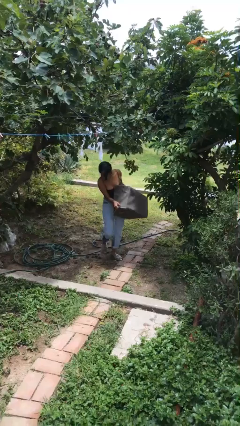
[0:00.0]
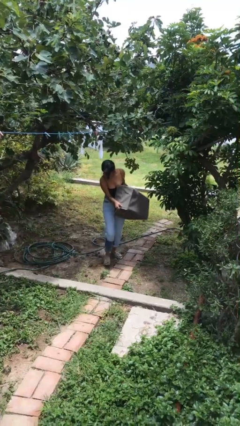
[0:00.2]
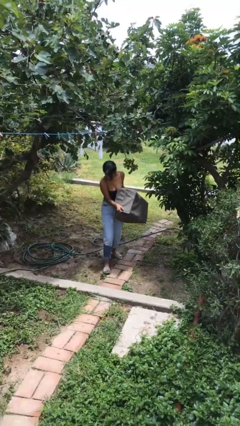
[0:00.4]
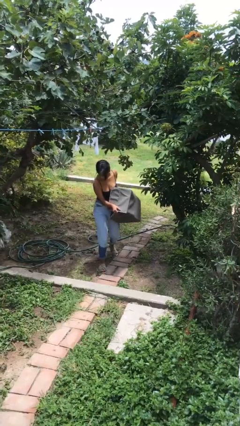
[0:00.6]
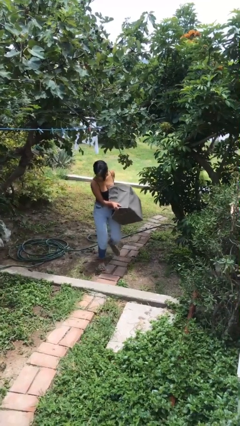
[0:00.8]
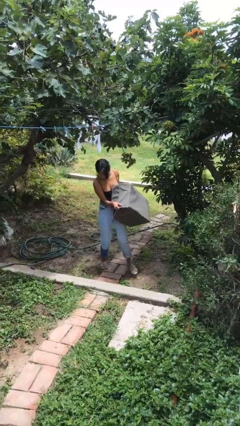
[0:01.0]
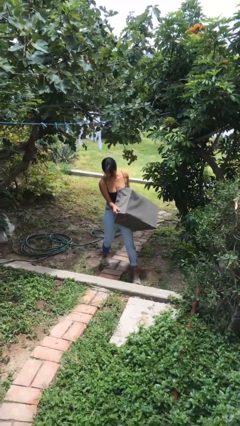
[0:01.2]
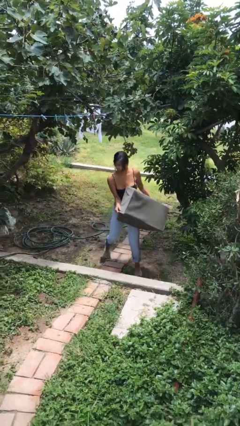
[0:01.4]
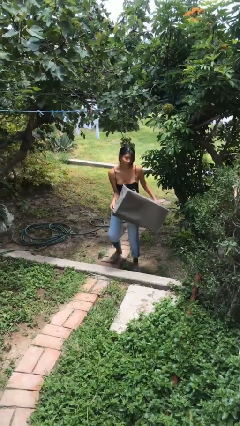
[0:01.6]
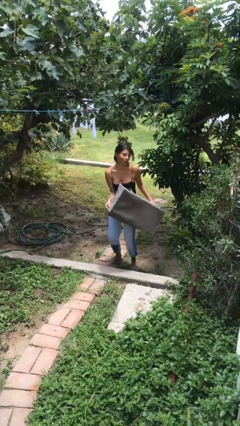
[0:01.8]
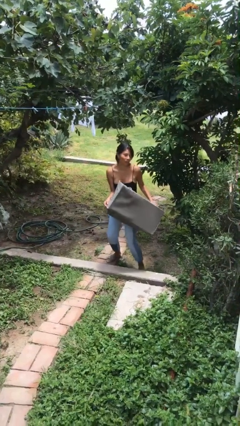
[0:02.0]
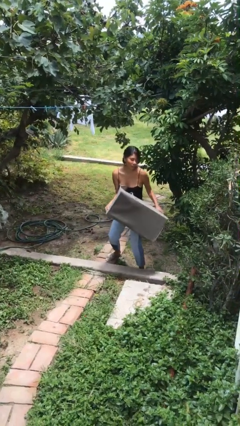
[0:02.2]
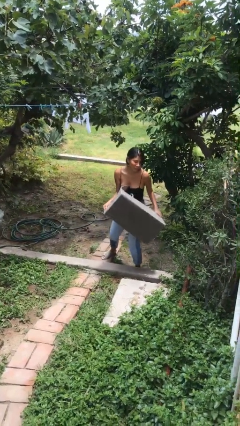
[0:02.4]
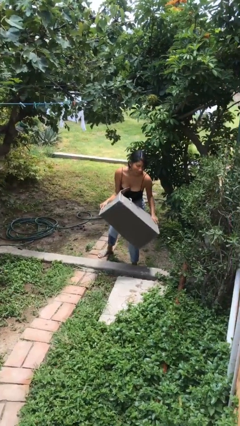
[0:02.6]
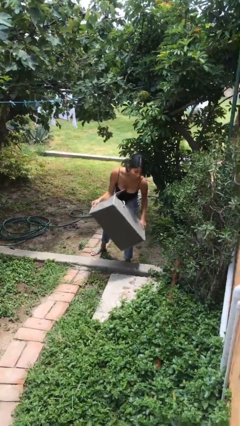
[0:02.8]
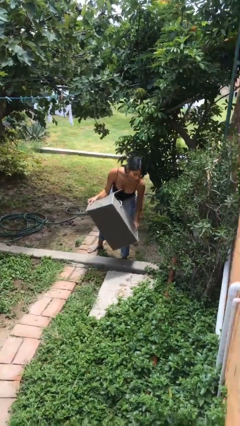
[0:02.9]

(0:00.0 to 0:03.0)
person carries heavy object

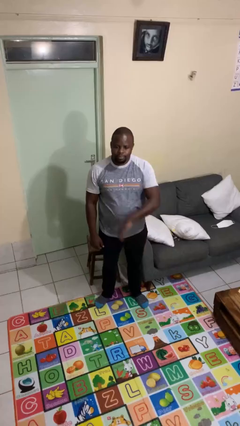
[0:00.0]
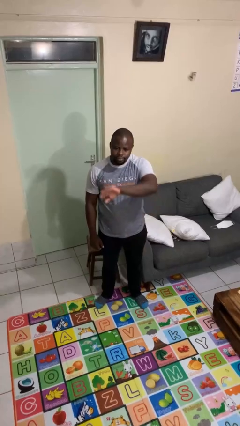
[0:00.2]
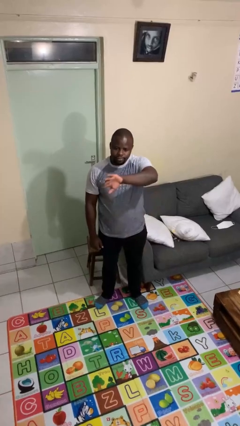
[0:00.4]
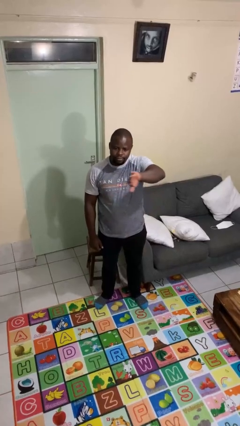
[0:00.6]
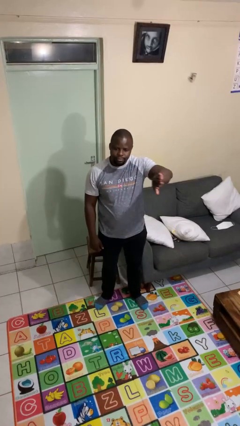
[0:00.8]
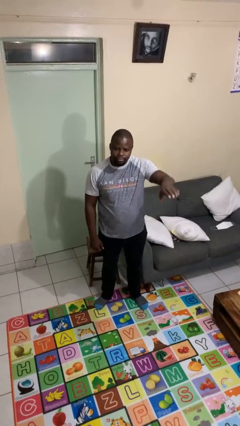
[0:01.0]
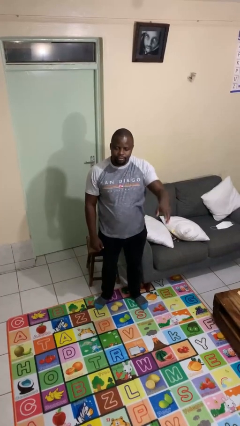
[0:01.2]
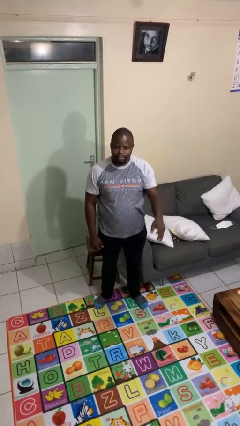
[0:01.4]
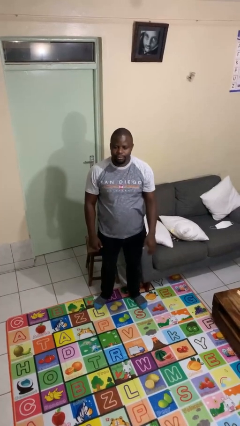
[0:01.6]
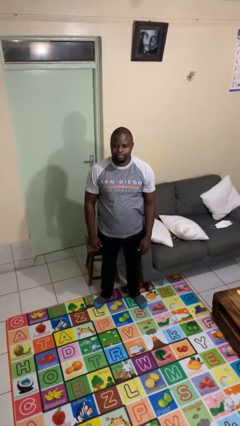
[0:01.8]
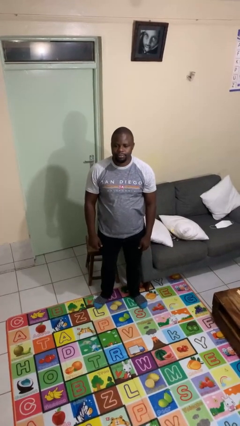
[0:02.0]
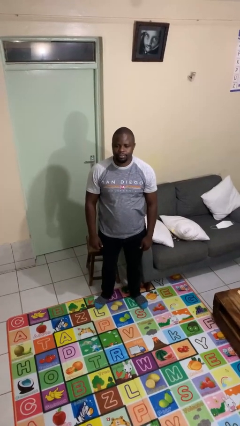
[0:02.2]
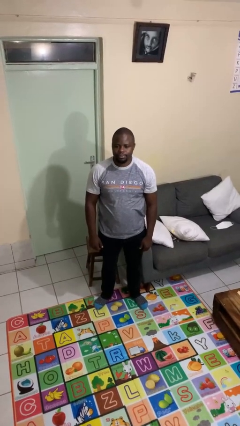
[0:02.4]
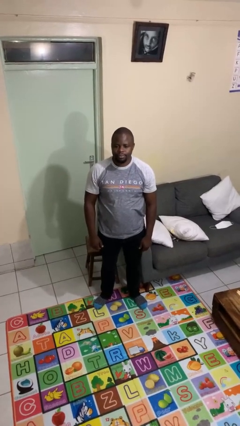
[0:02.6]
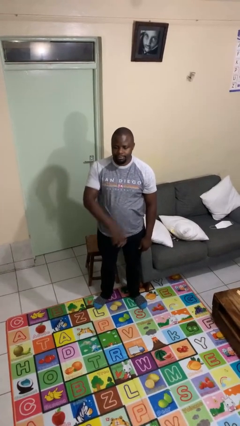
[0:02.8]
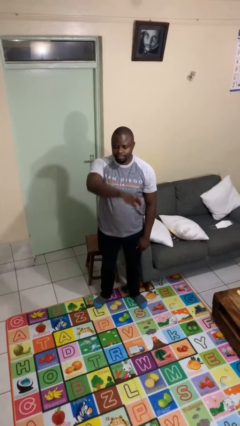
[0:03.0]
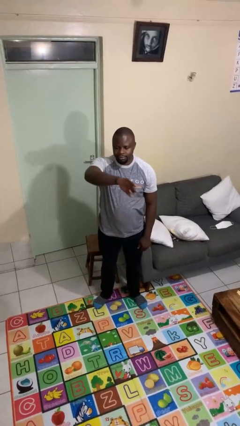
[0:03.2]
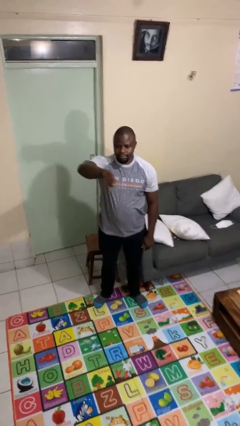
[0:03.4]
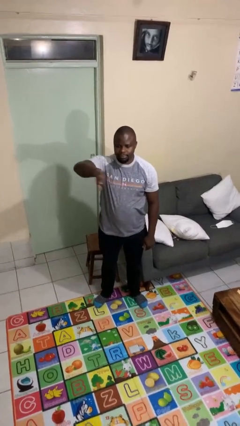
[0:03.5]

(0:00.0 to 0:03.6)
person gestures swipe left

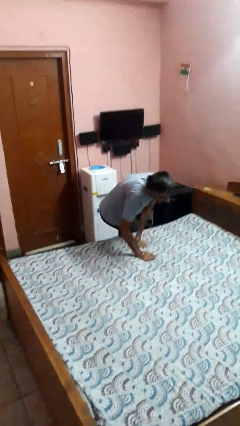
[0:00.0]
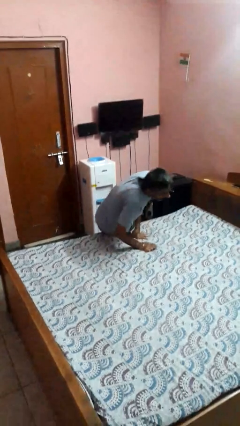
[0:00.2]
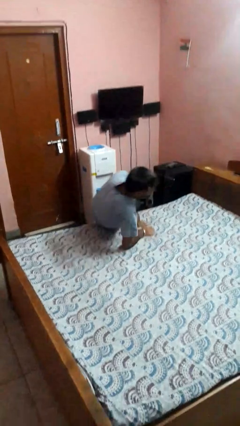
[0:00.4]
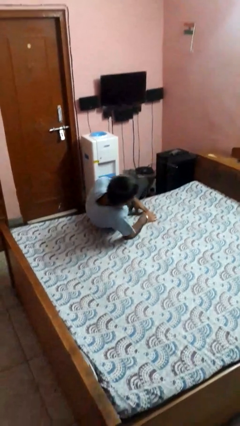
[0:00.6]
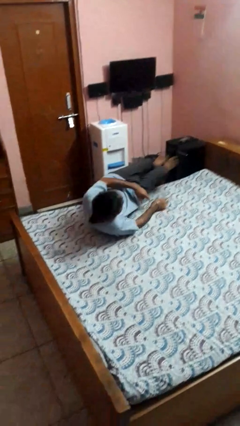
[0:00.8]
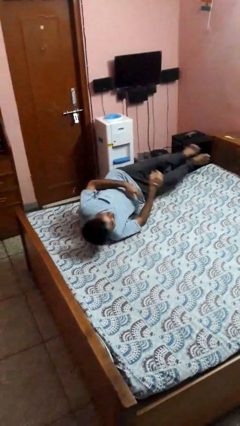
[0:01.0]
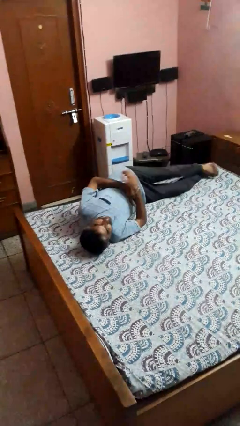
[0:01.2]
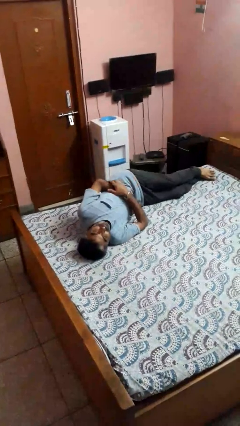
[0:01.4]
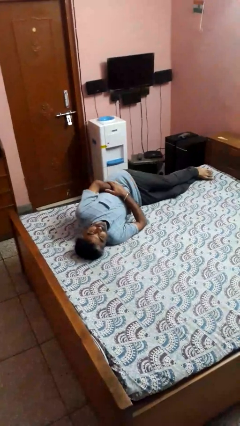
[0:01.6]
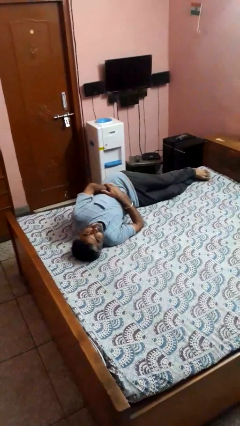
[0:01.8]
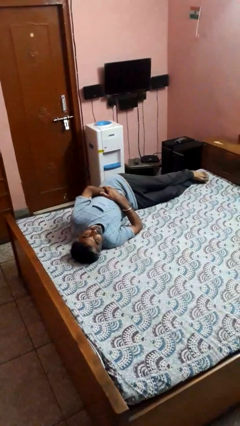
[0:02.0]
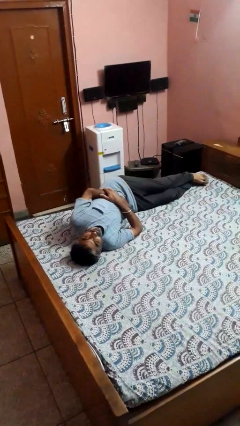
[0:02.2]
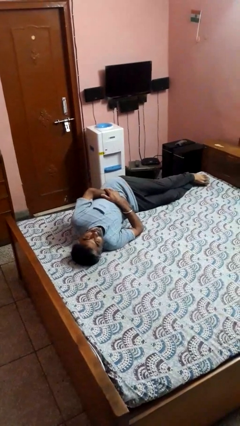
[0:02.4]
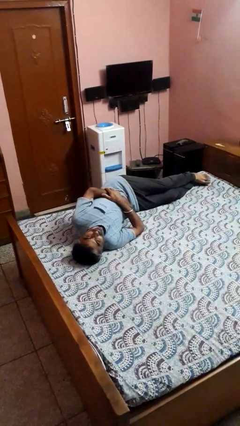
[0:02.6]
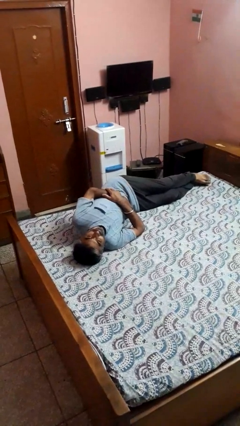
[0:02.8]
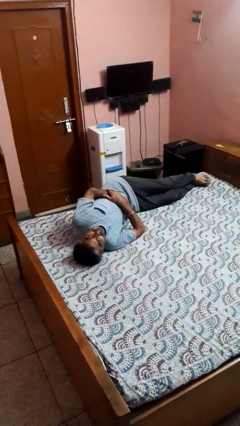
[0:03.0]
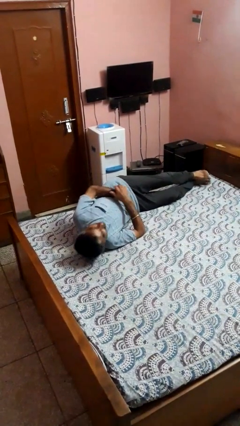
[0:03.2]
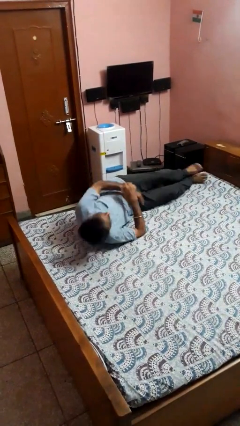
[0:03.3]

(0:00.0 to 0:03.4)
person lies down on bed

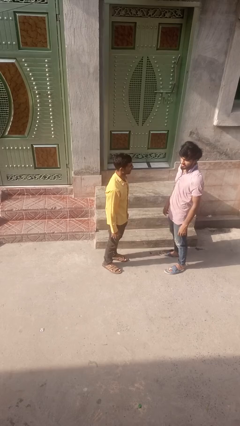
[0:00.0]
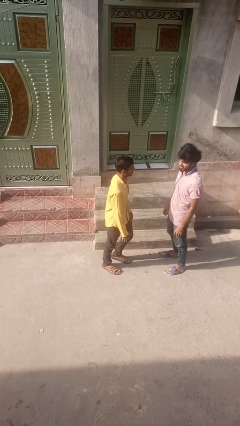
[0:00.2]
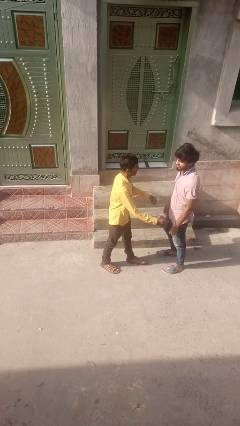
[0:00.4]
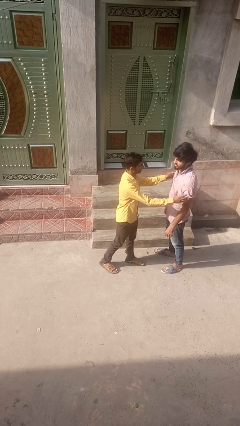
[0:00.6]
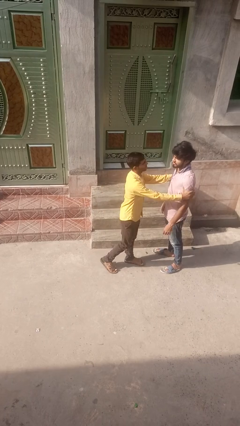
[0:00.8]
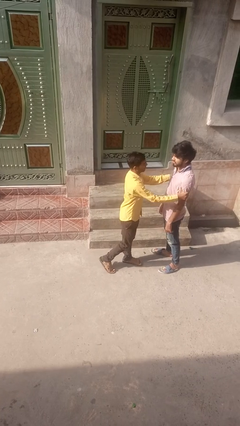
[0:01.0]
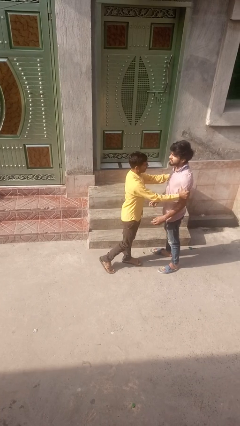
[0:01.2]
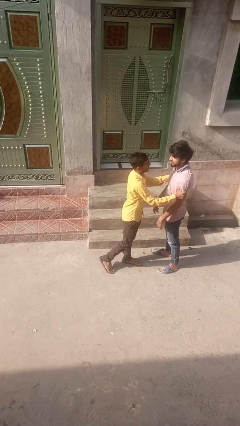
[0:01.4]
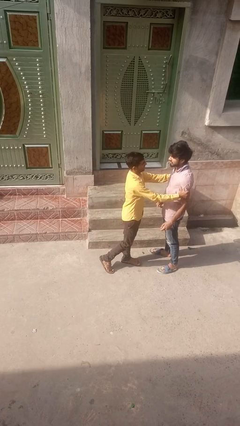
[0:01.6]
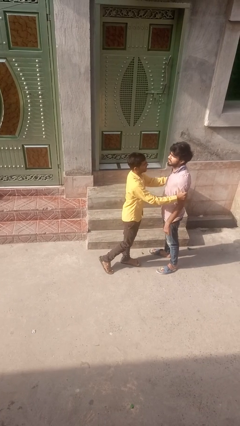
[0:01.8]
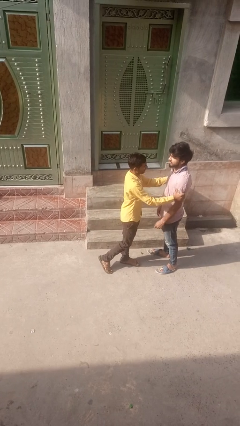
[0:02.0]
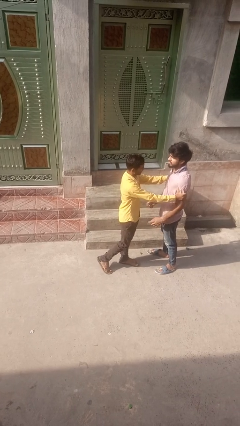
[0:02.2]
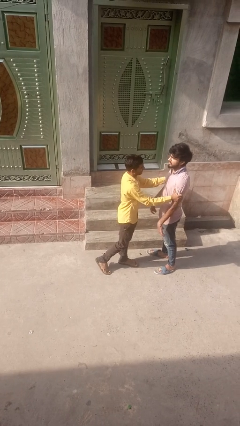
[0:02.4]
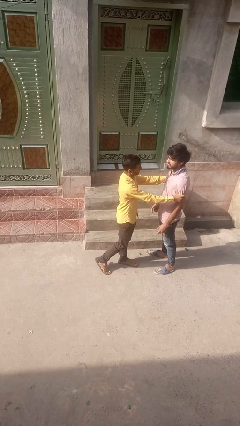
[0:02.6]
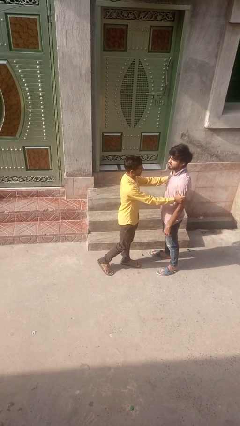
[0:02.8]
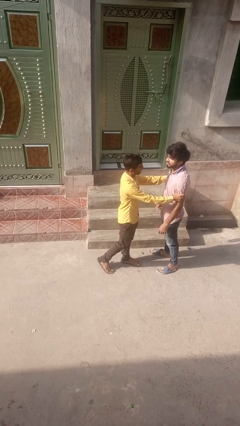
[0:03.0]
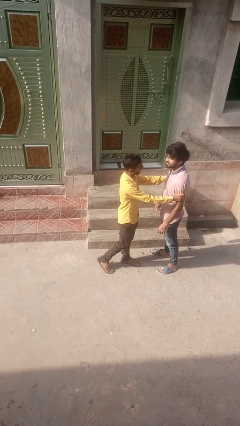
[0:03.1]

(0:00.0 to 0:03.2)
person grabs person by bicep

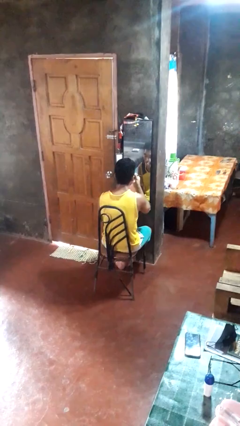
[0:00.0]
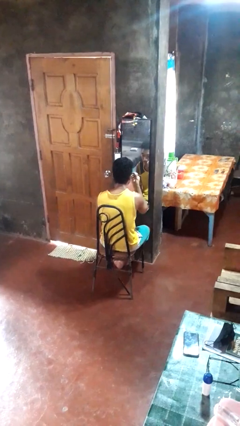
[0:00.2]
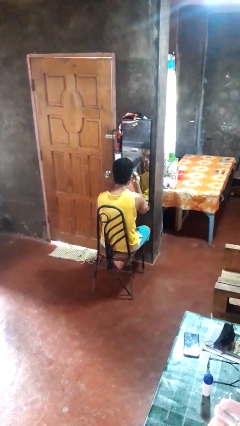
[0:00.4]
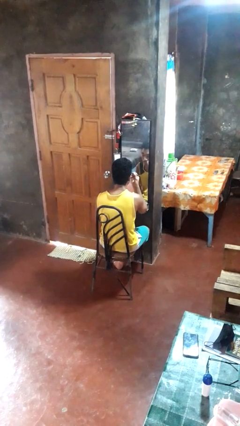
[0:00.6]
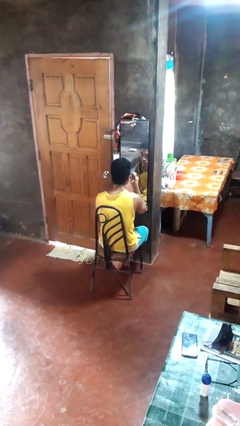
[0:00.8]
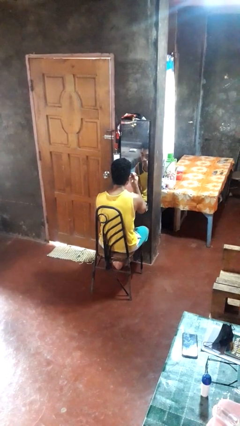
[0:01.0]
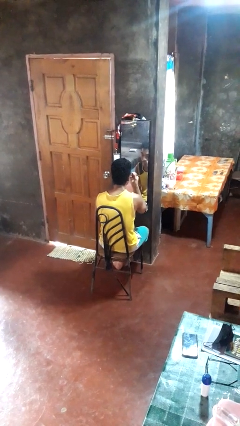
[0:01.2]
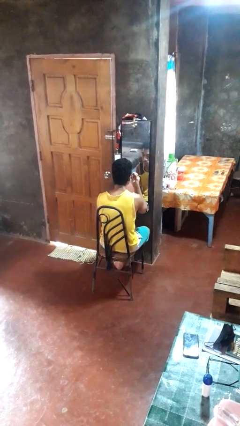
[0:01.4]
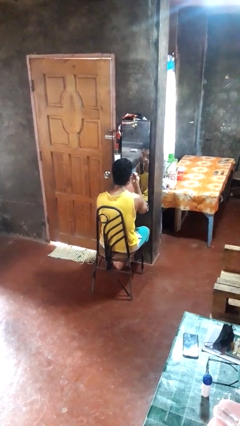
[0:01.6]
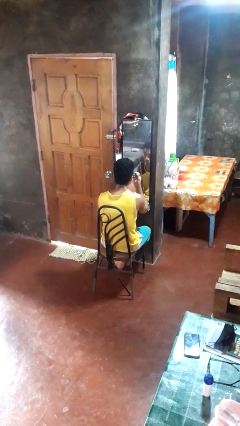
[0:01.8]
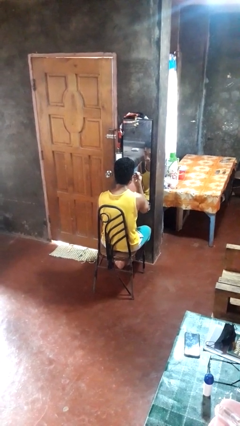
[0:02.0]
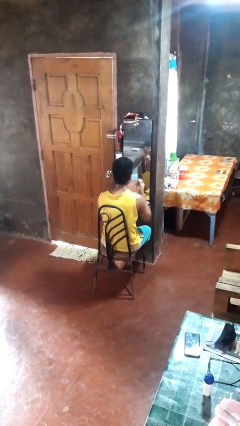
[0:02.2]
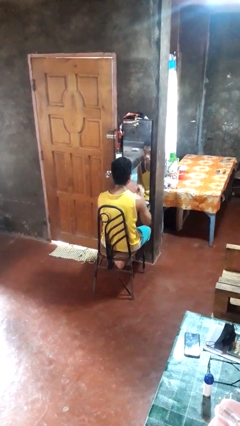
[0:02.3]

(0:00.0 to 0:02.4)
person applies eye makeup

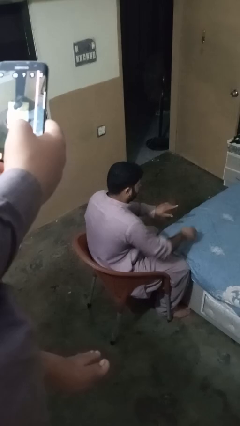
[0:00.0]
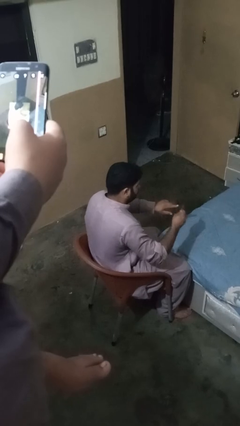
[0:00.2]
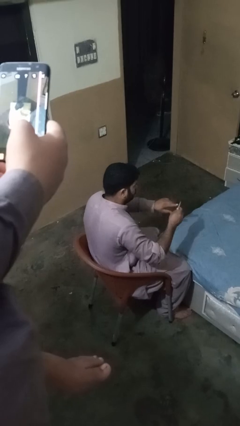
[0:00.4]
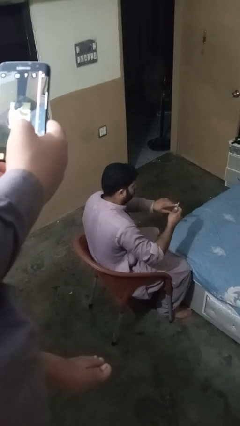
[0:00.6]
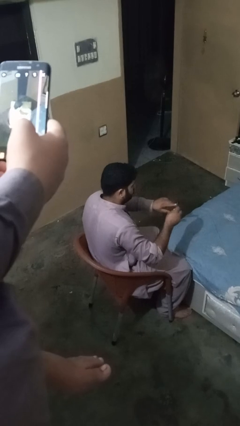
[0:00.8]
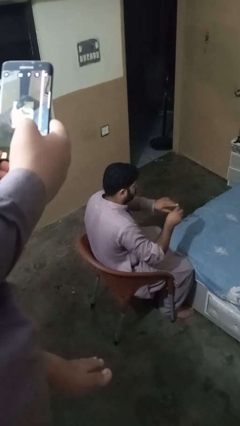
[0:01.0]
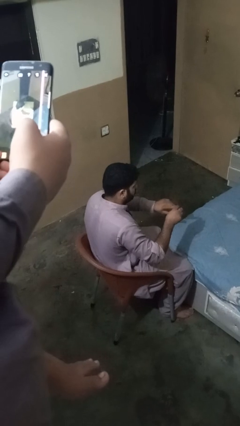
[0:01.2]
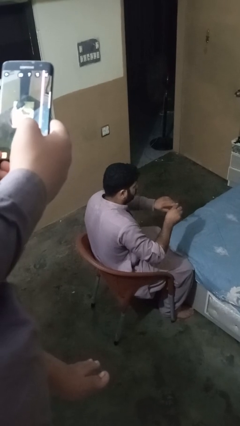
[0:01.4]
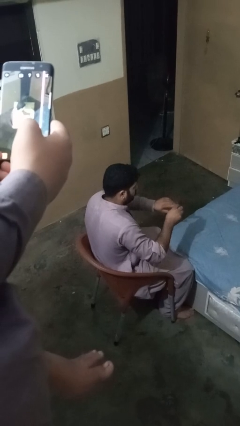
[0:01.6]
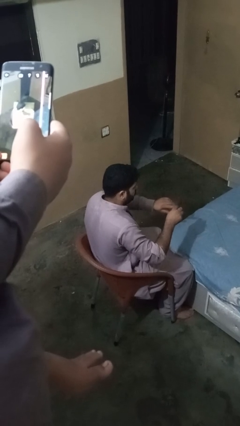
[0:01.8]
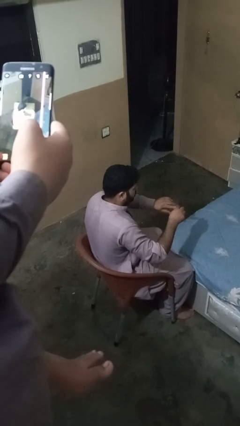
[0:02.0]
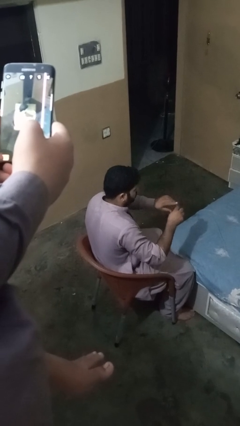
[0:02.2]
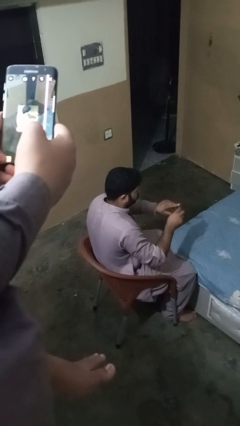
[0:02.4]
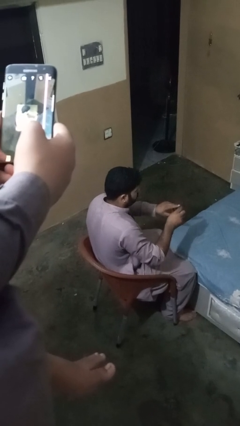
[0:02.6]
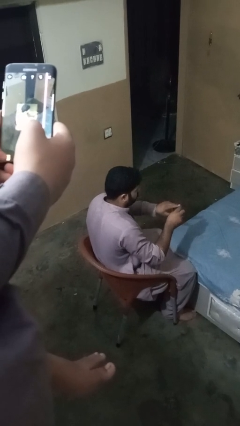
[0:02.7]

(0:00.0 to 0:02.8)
person files fingernails
